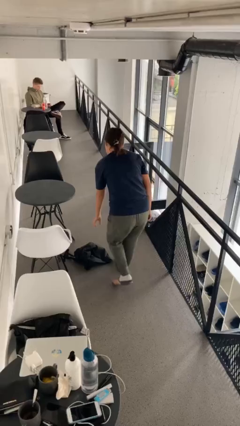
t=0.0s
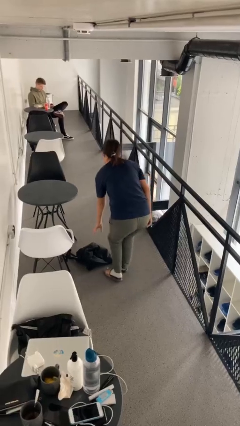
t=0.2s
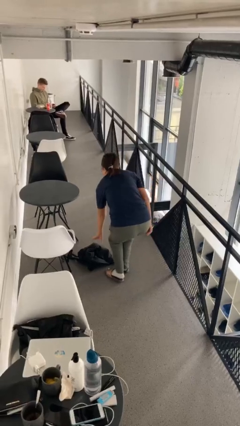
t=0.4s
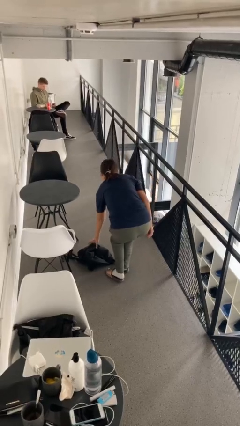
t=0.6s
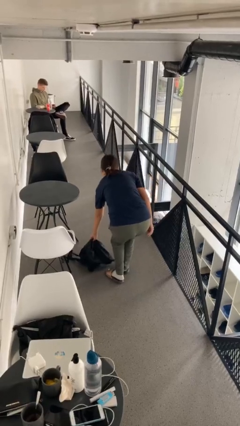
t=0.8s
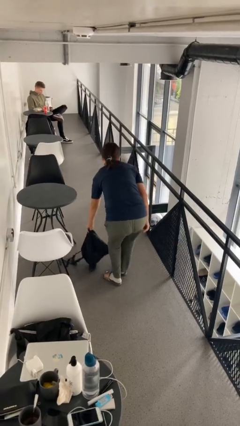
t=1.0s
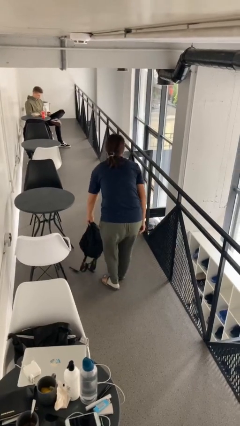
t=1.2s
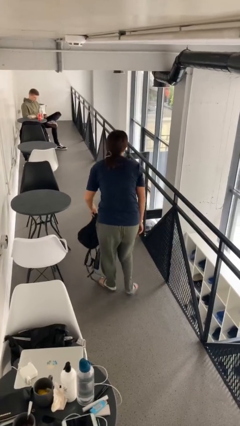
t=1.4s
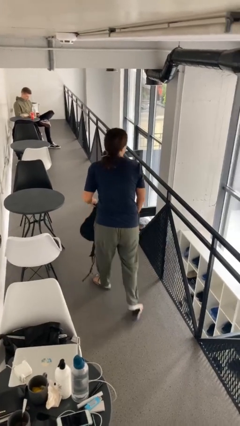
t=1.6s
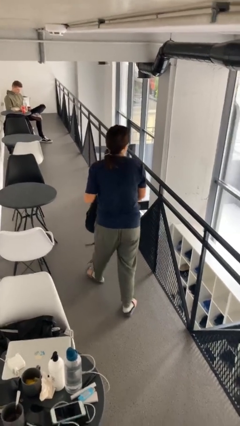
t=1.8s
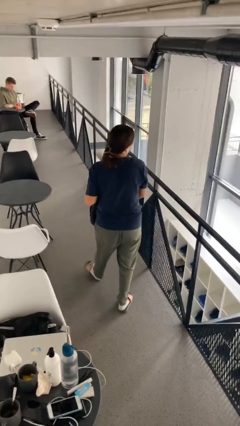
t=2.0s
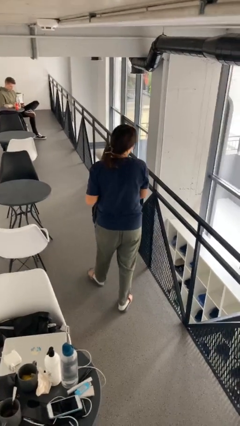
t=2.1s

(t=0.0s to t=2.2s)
person picks up object from floor

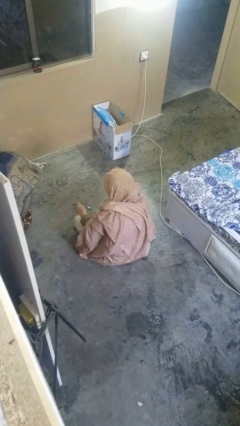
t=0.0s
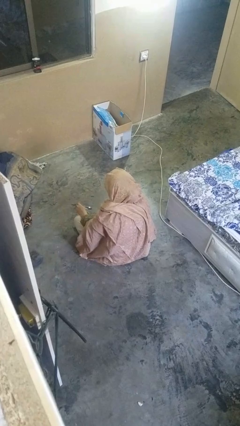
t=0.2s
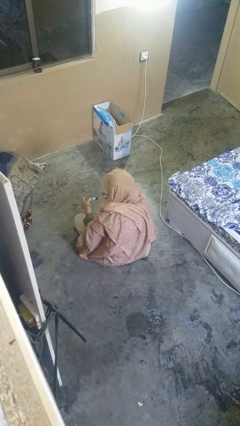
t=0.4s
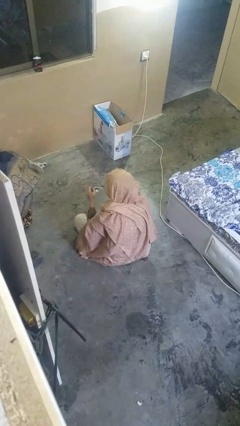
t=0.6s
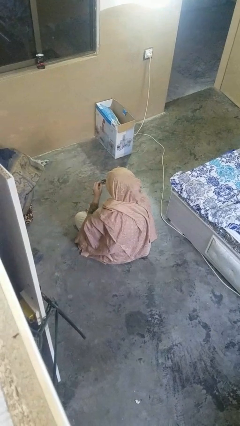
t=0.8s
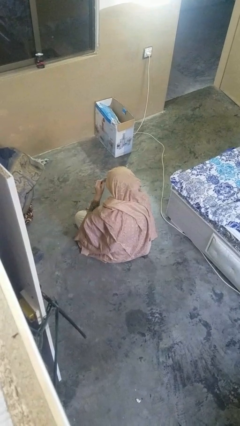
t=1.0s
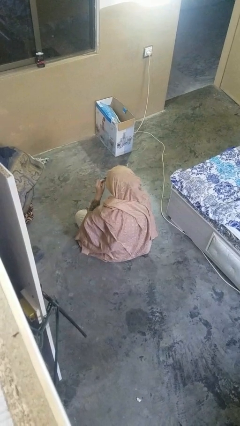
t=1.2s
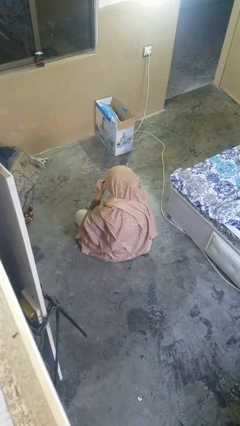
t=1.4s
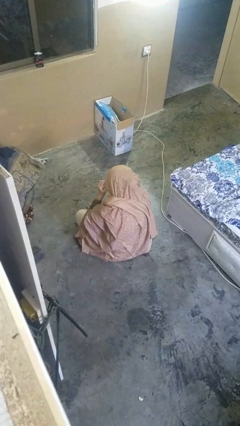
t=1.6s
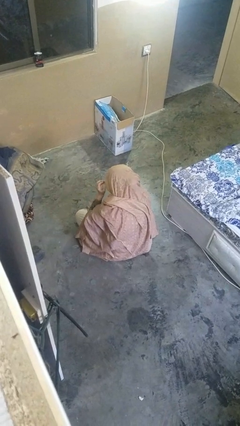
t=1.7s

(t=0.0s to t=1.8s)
person puts on glasses

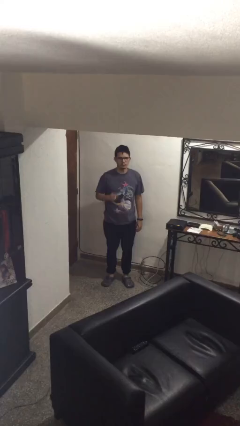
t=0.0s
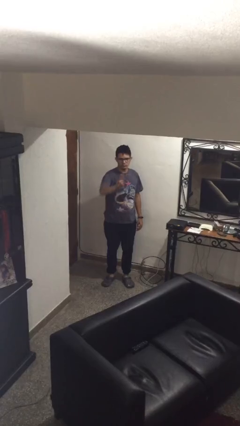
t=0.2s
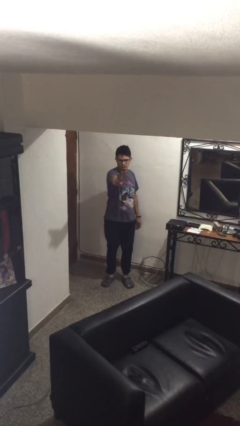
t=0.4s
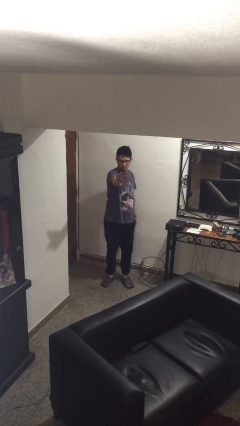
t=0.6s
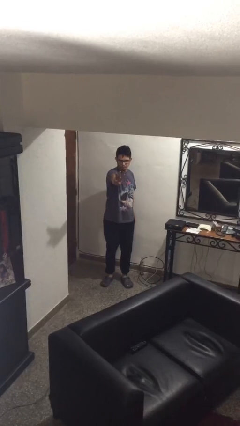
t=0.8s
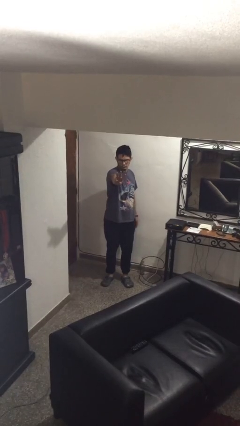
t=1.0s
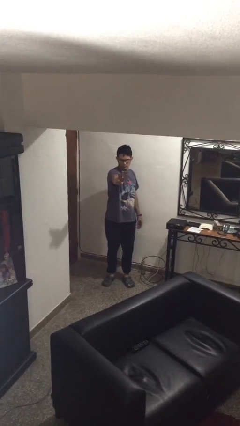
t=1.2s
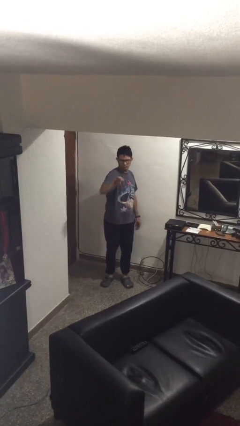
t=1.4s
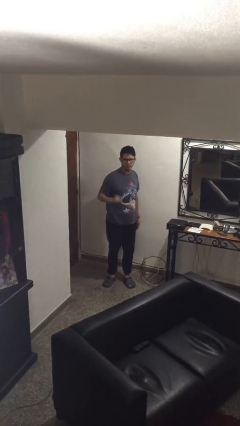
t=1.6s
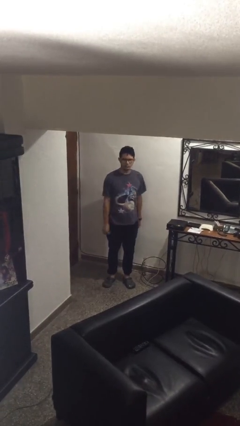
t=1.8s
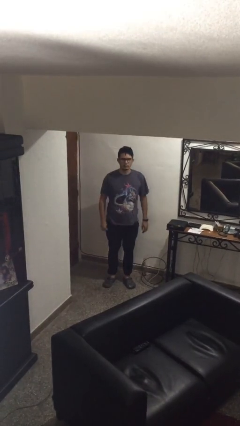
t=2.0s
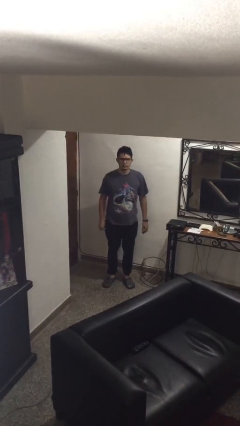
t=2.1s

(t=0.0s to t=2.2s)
person gestures number three

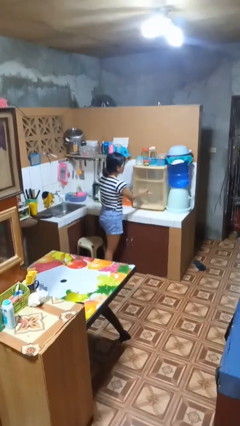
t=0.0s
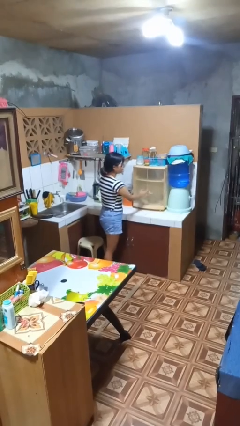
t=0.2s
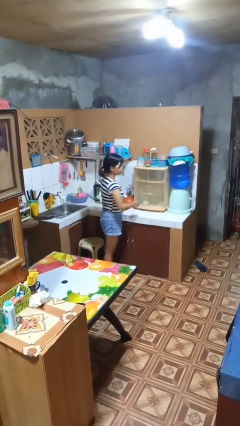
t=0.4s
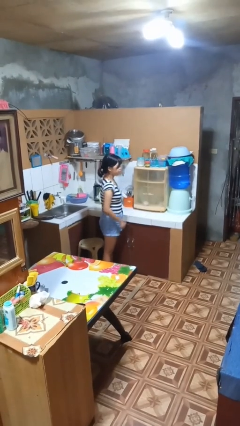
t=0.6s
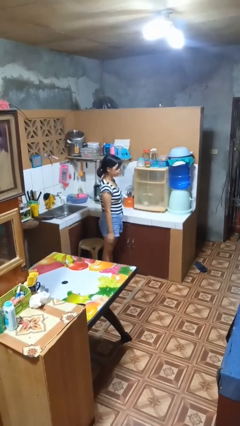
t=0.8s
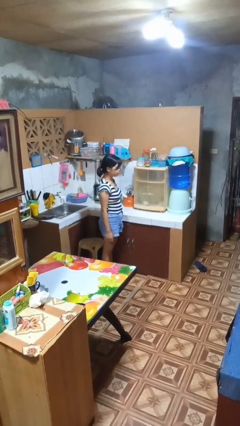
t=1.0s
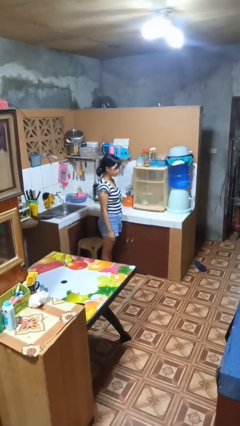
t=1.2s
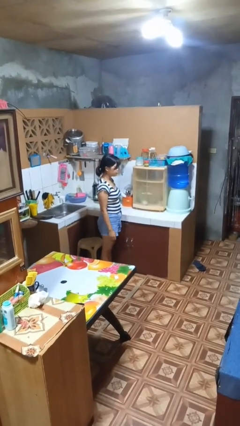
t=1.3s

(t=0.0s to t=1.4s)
person closes cabinet

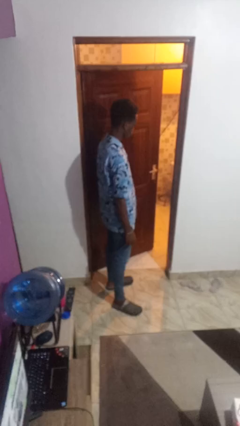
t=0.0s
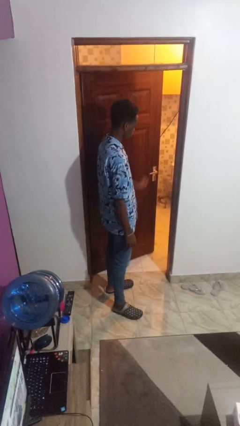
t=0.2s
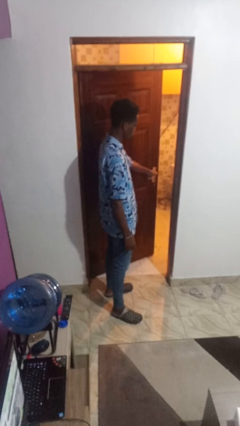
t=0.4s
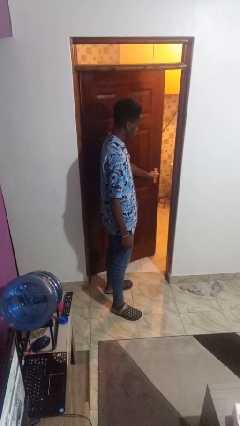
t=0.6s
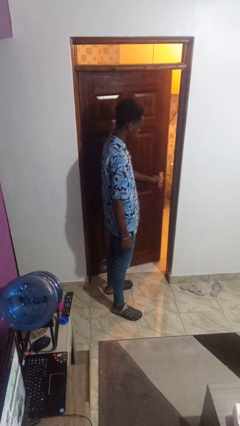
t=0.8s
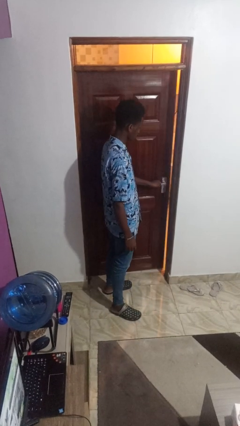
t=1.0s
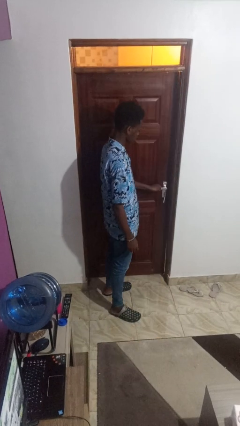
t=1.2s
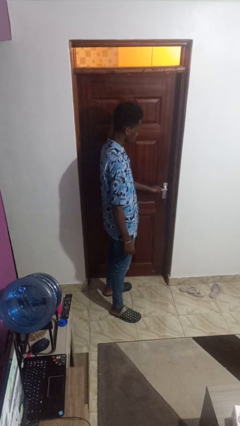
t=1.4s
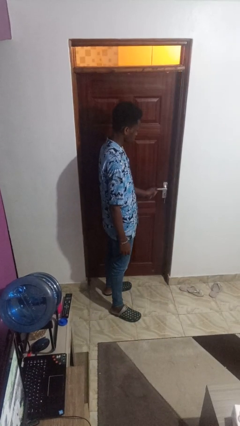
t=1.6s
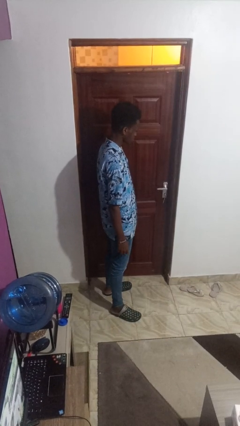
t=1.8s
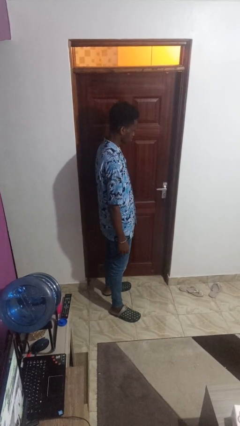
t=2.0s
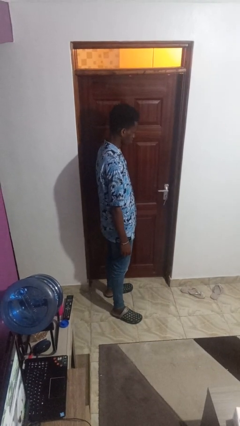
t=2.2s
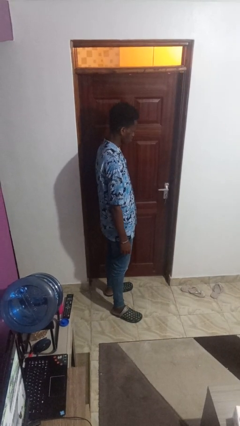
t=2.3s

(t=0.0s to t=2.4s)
person closes facility door

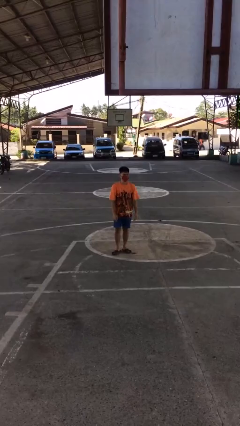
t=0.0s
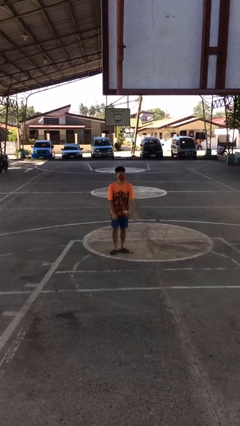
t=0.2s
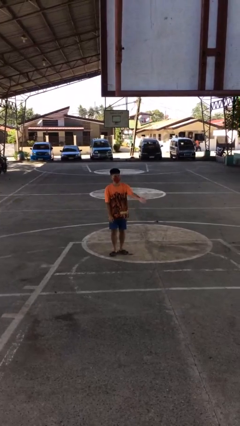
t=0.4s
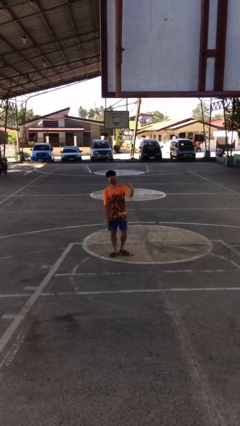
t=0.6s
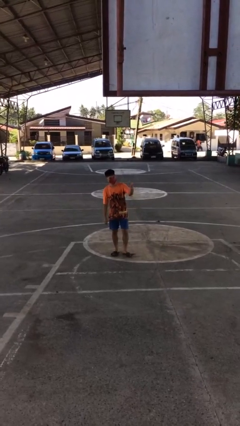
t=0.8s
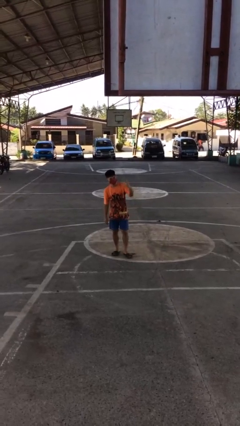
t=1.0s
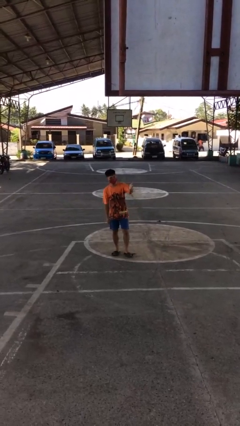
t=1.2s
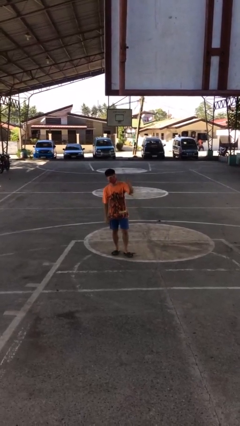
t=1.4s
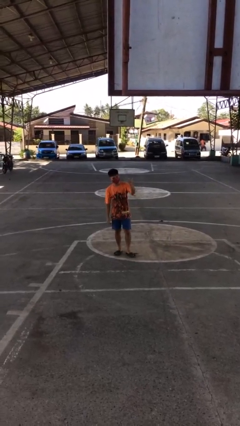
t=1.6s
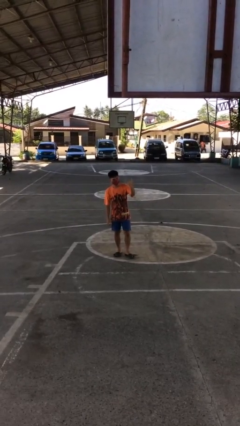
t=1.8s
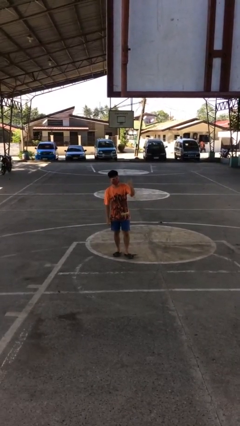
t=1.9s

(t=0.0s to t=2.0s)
person gestures come here

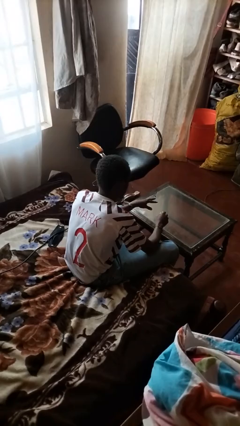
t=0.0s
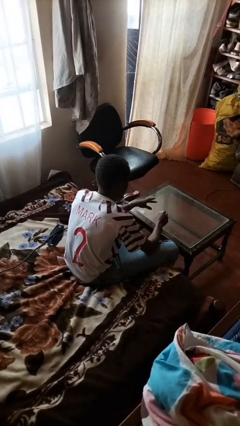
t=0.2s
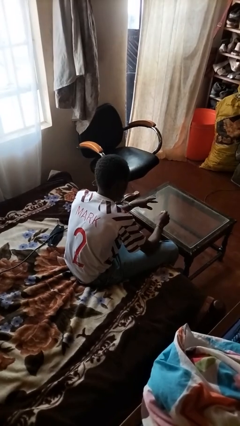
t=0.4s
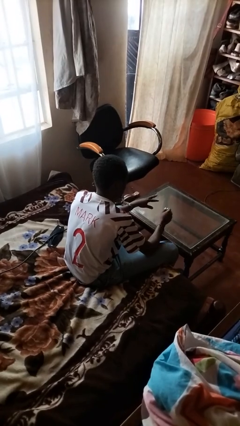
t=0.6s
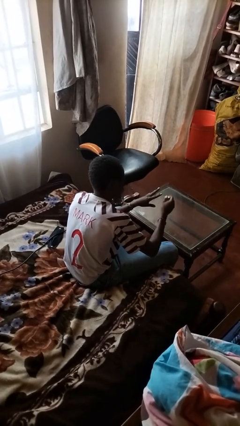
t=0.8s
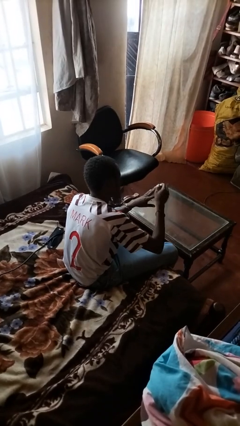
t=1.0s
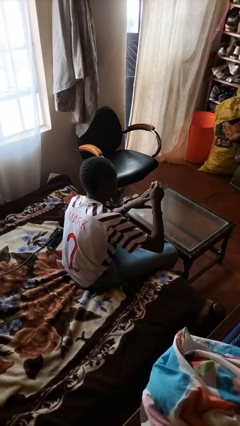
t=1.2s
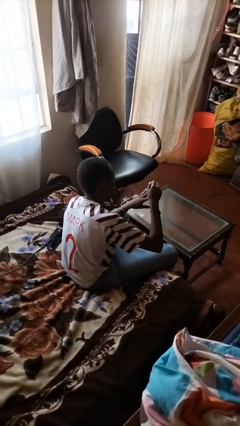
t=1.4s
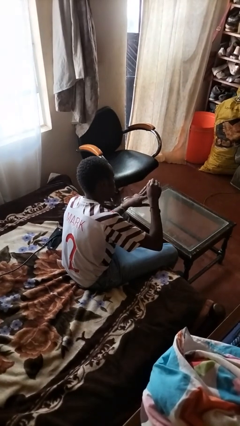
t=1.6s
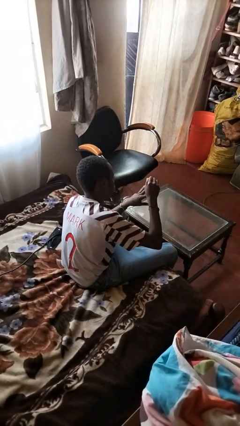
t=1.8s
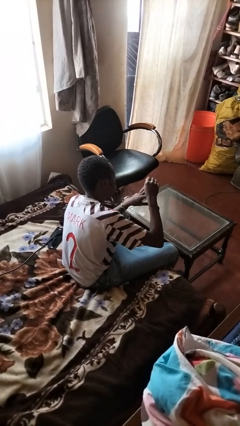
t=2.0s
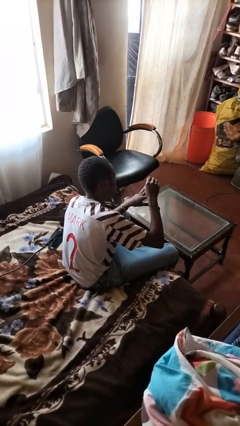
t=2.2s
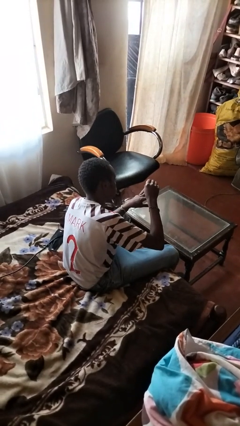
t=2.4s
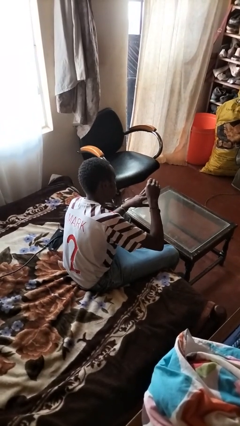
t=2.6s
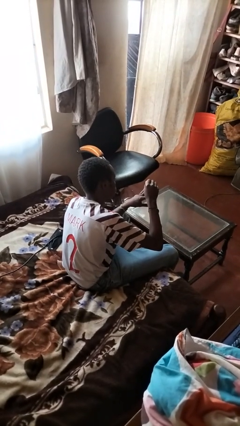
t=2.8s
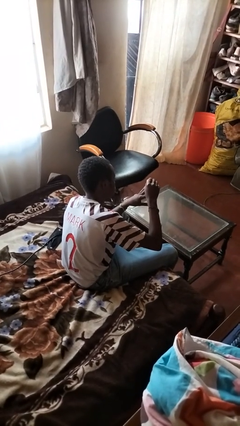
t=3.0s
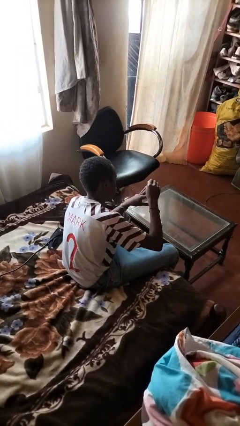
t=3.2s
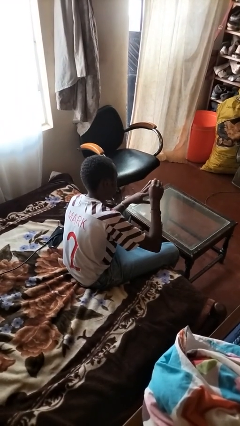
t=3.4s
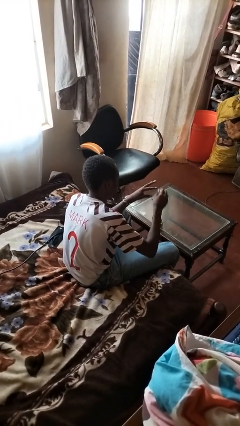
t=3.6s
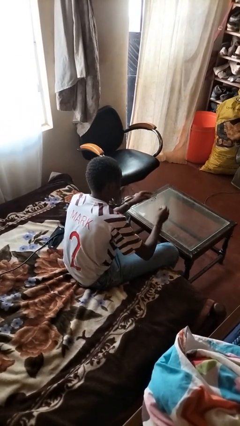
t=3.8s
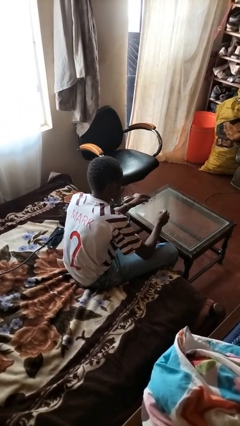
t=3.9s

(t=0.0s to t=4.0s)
person paints fingernails

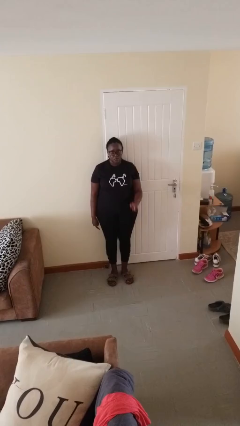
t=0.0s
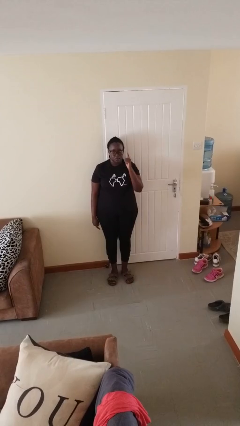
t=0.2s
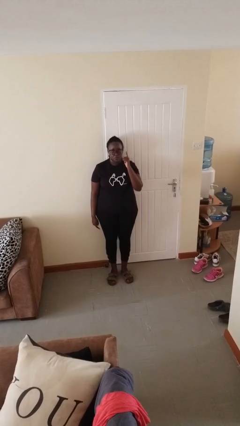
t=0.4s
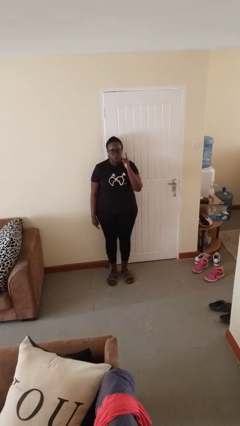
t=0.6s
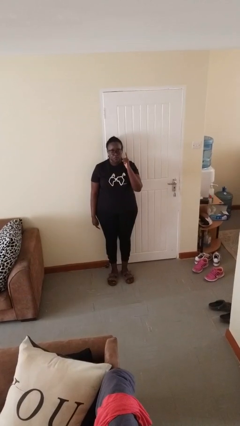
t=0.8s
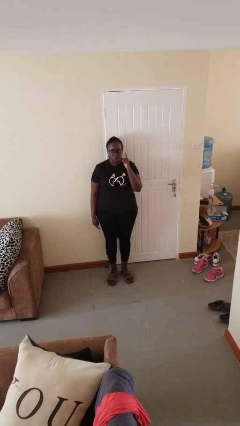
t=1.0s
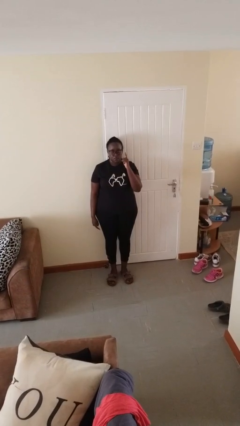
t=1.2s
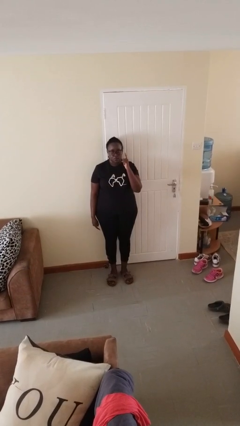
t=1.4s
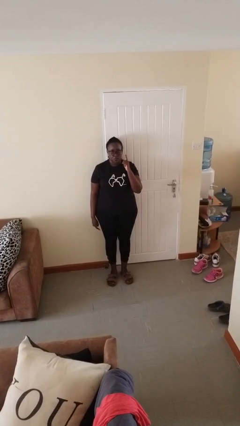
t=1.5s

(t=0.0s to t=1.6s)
person gestures number one
